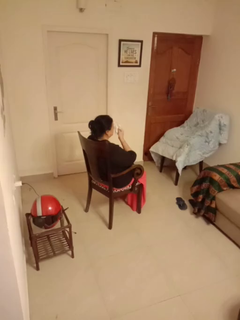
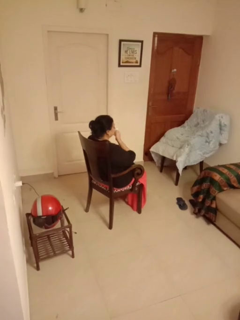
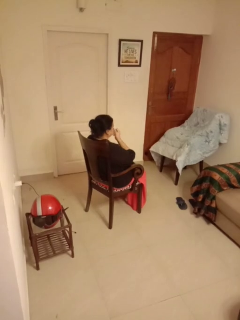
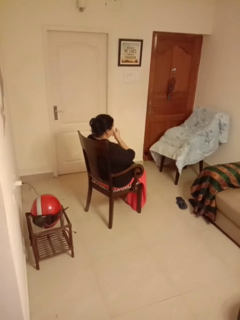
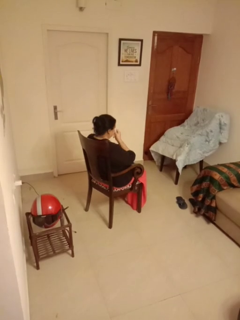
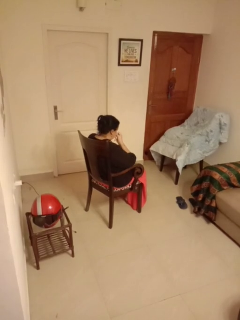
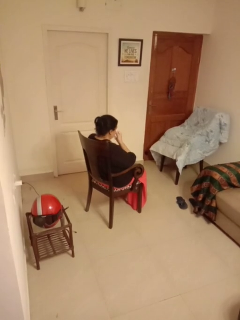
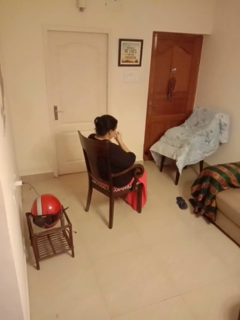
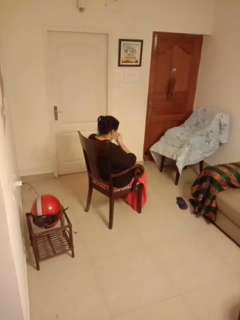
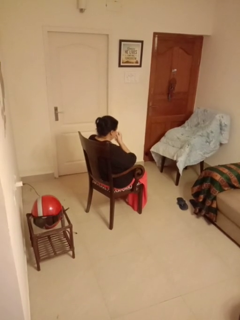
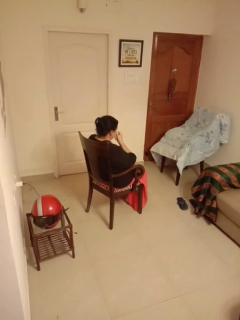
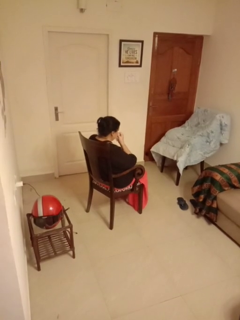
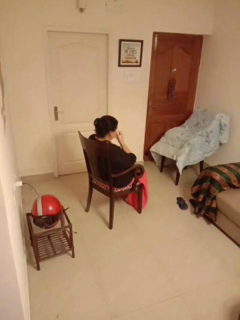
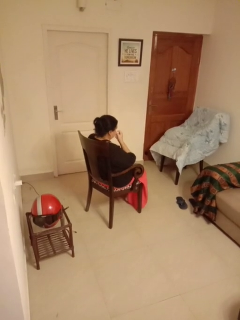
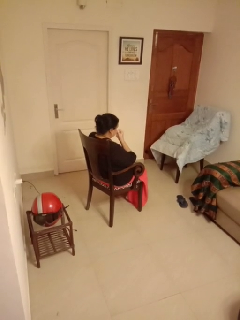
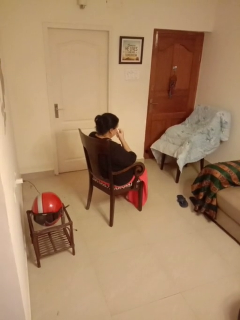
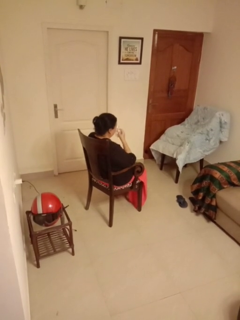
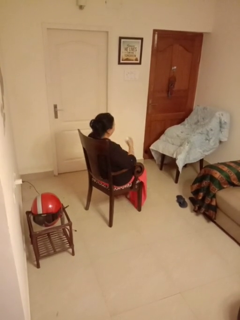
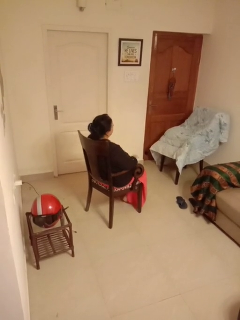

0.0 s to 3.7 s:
person blows nose

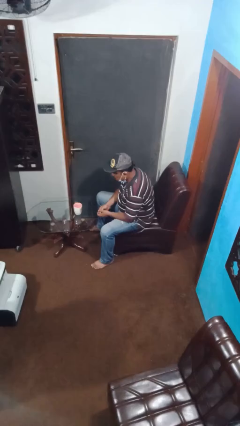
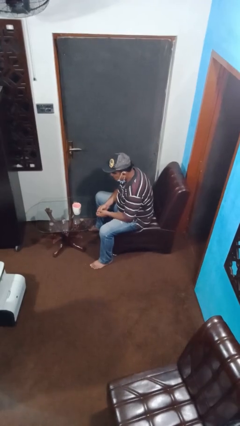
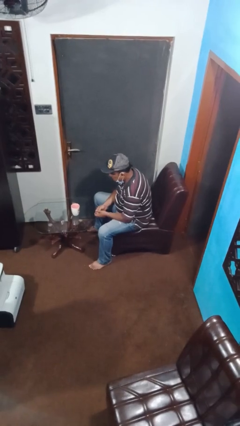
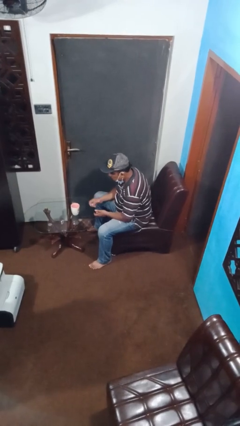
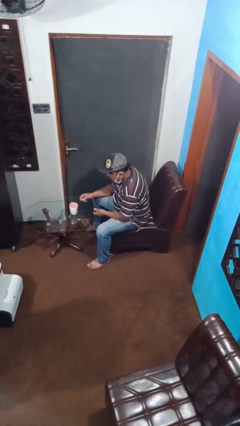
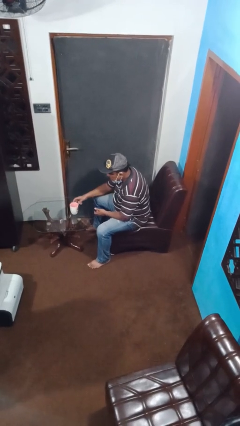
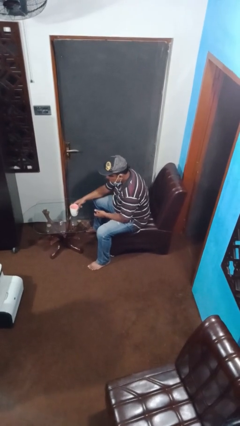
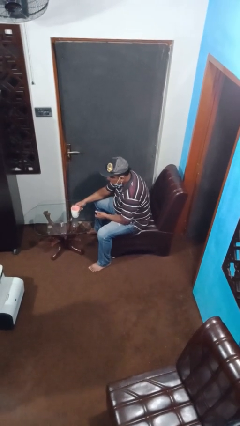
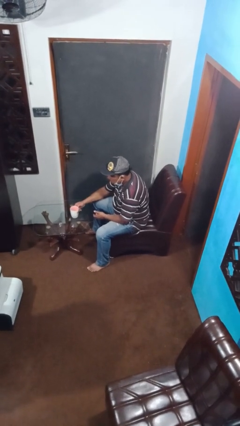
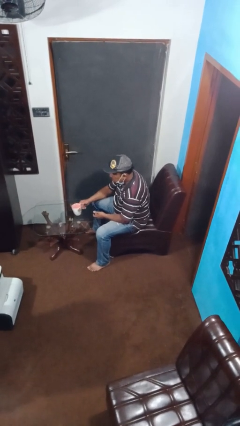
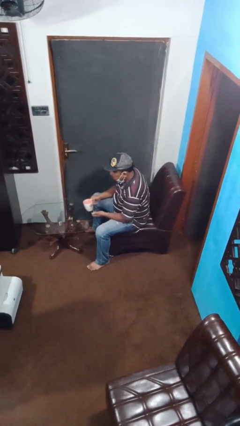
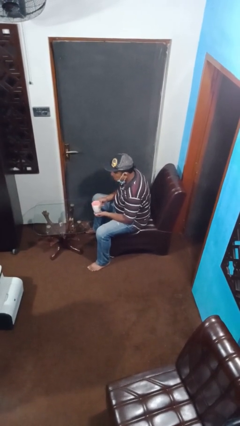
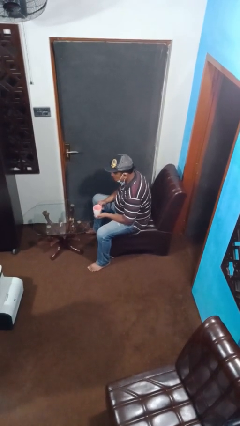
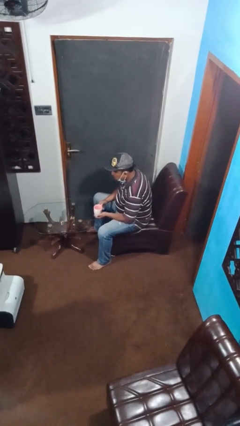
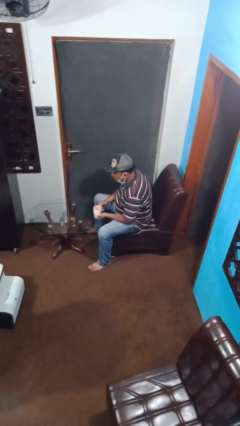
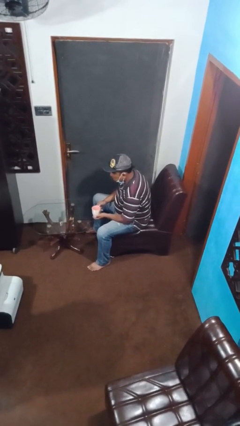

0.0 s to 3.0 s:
person picks up object from table

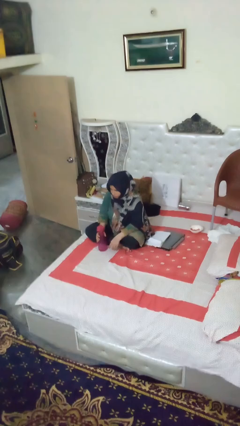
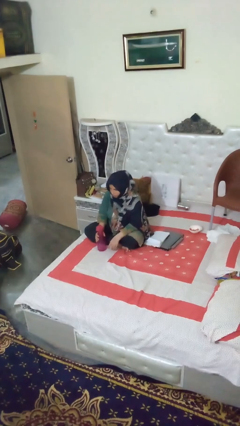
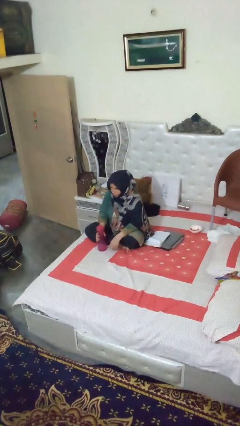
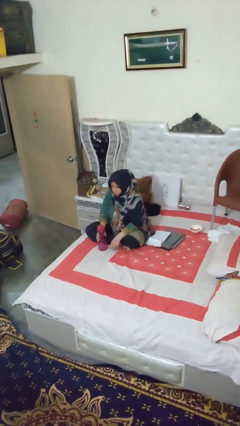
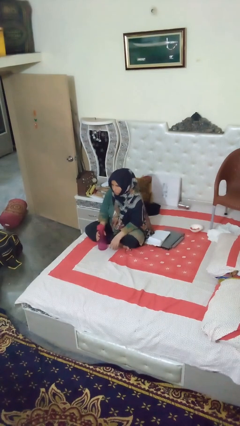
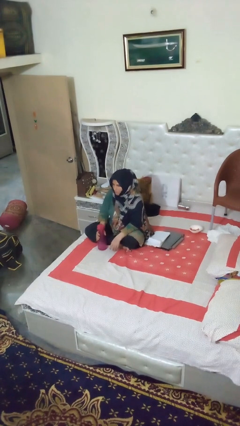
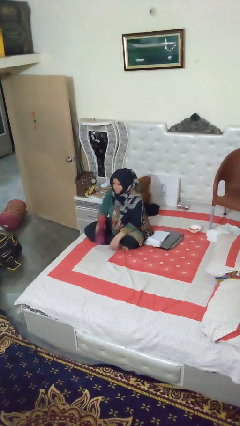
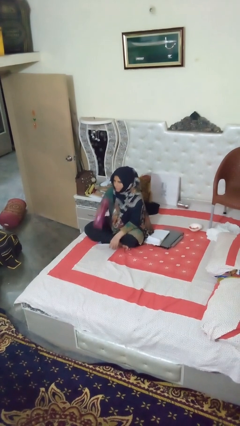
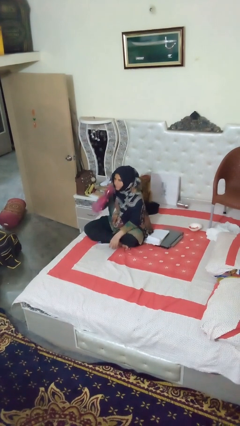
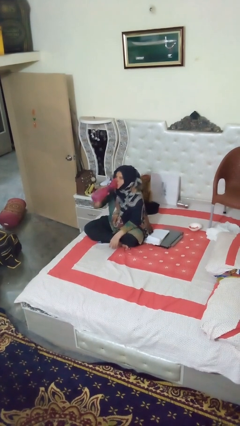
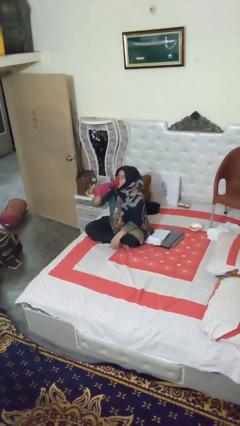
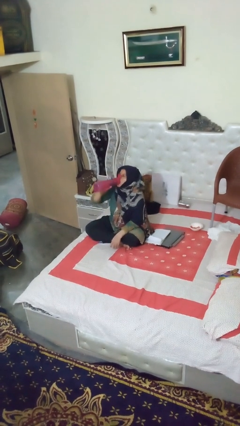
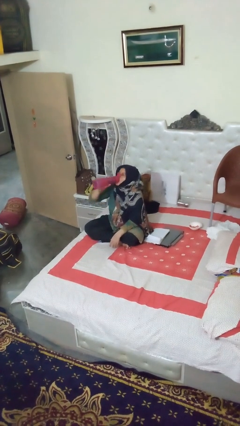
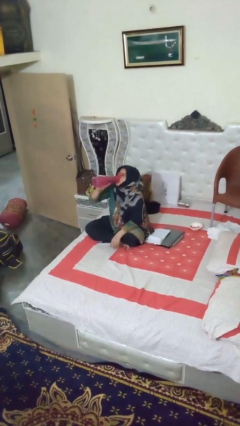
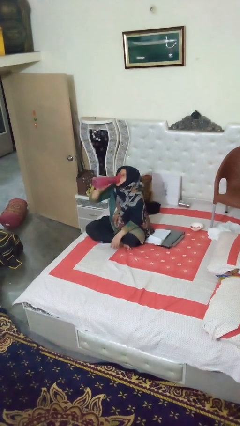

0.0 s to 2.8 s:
person drinks from bottle

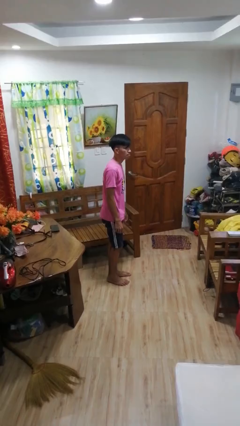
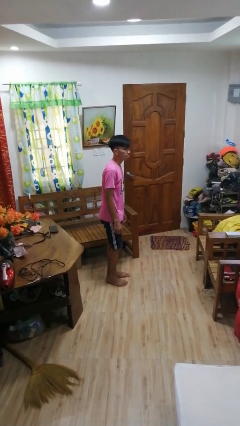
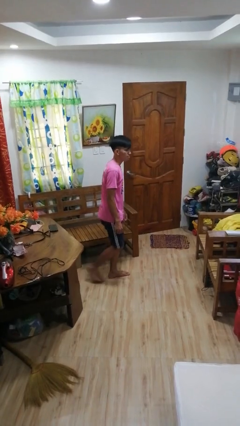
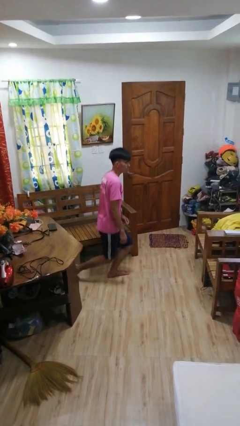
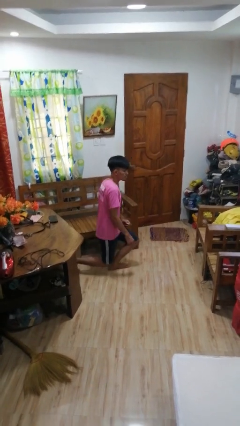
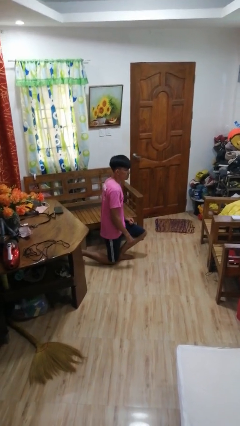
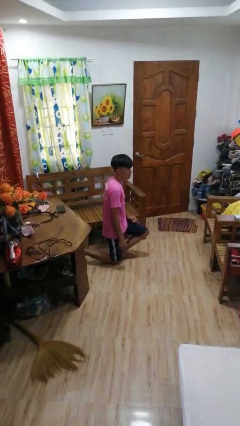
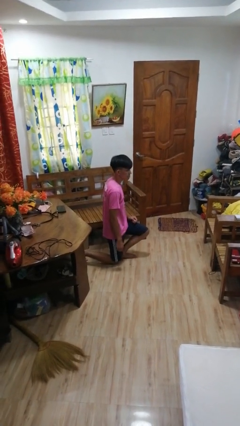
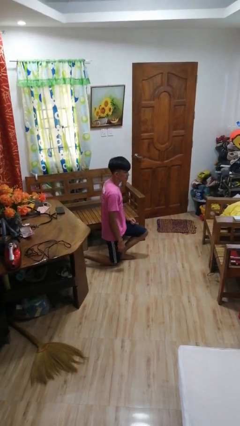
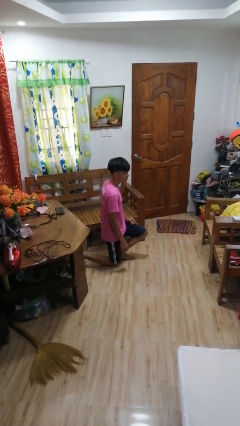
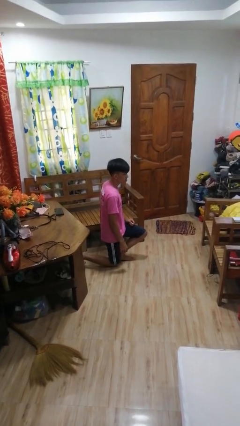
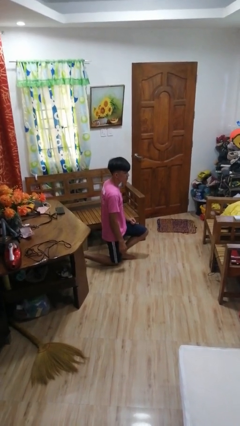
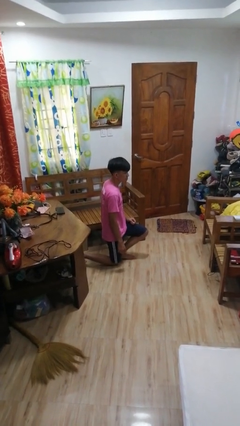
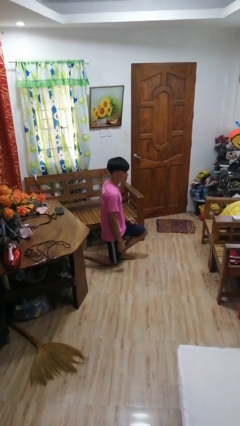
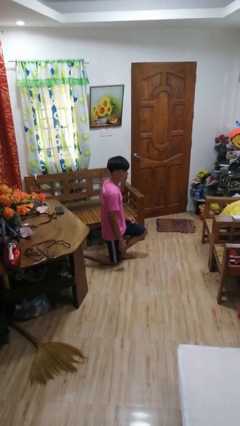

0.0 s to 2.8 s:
person kneels

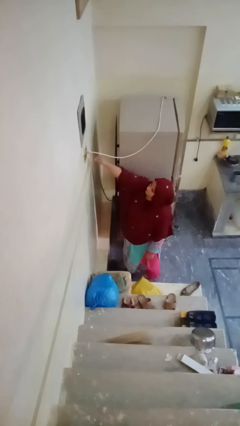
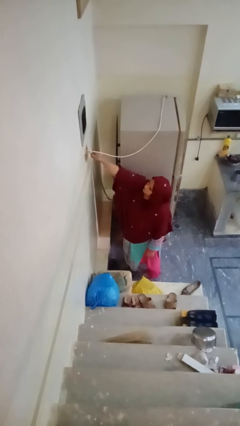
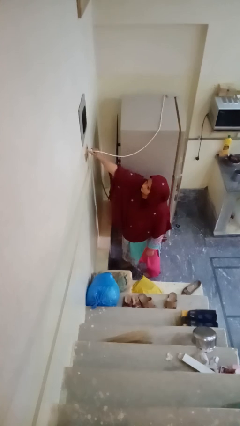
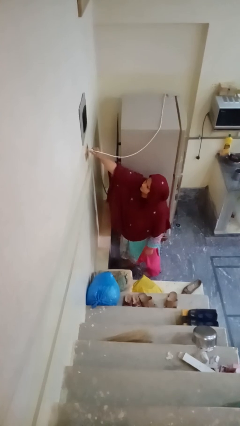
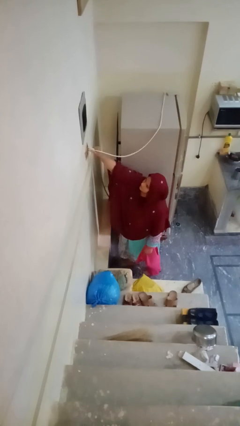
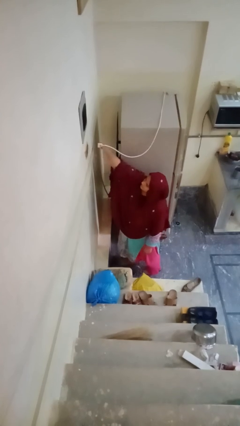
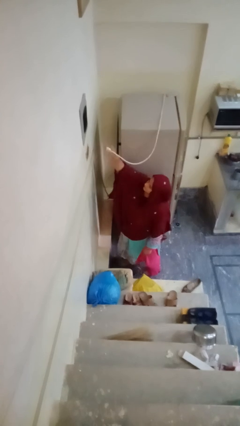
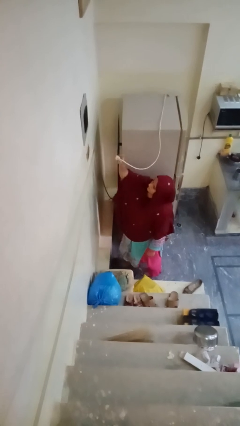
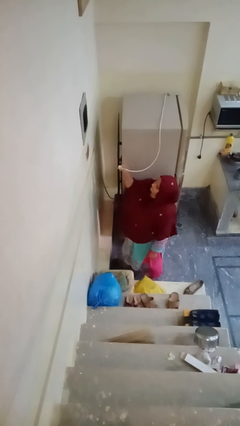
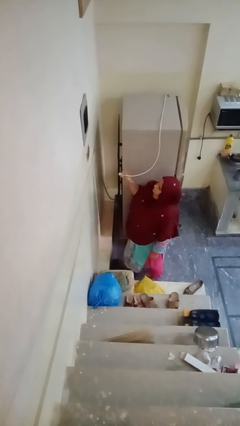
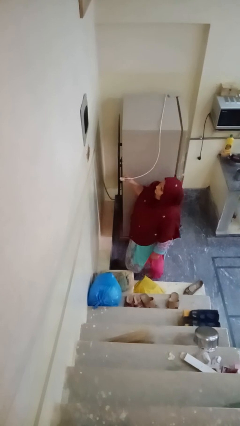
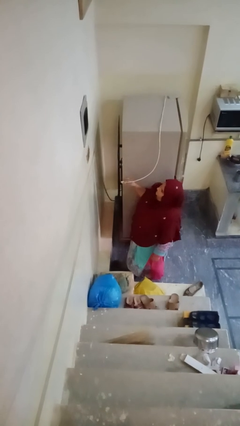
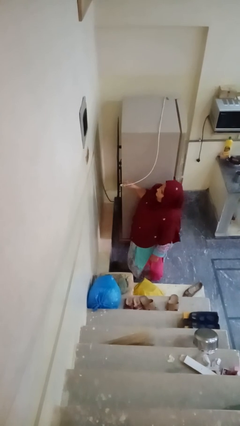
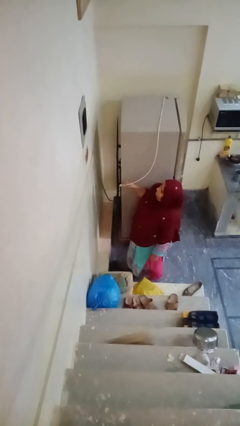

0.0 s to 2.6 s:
person unplugs from electrical socket

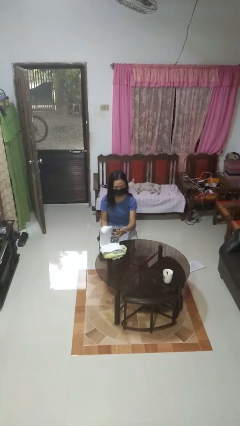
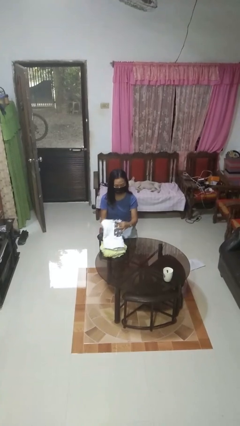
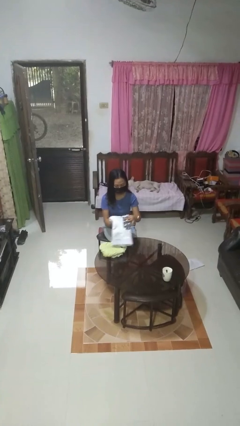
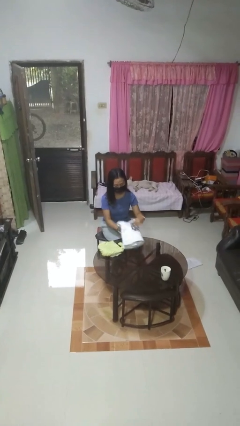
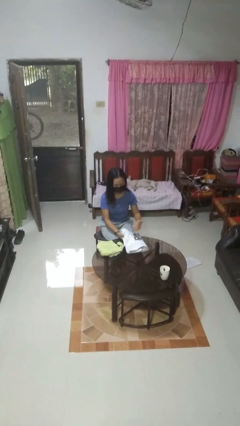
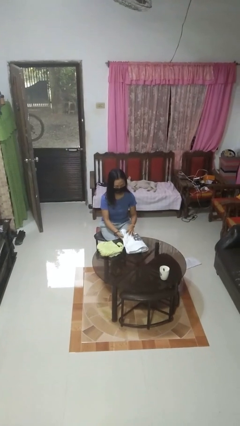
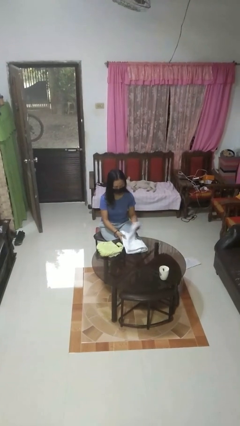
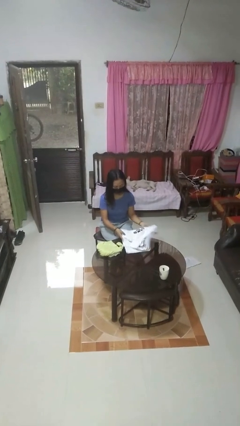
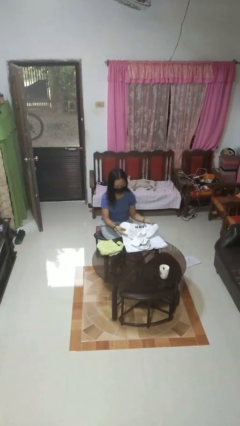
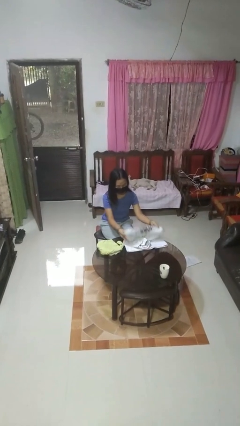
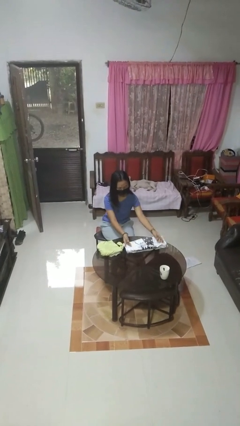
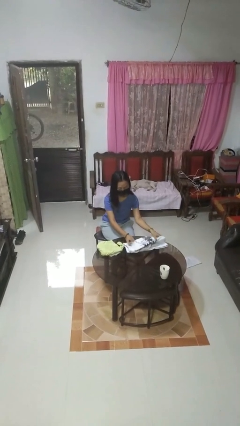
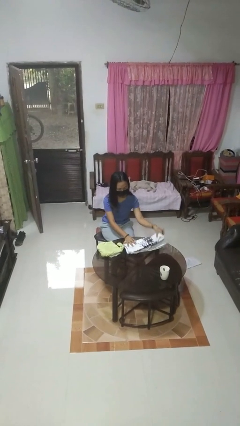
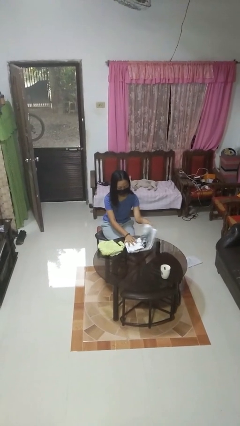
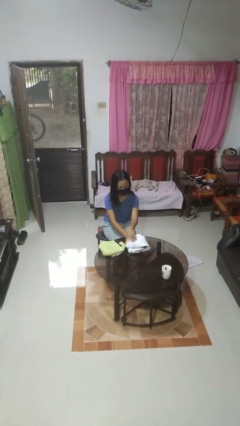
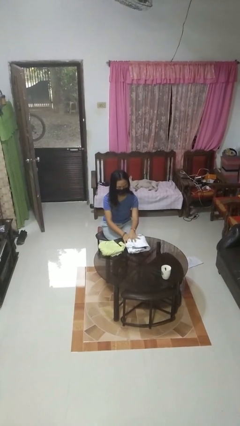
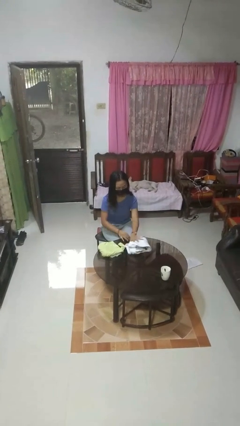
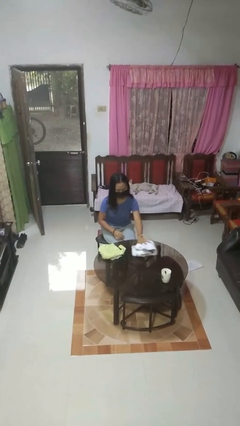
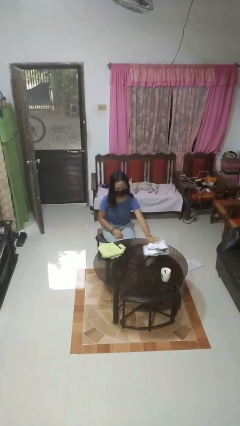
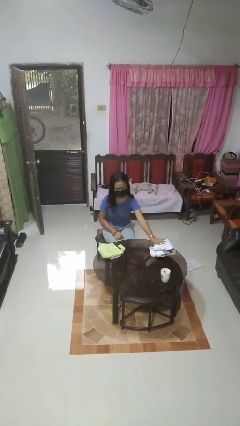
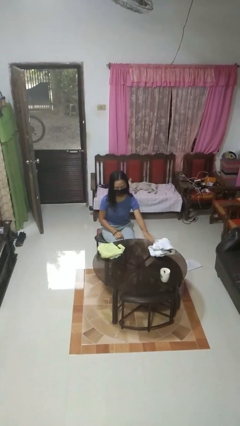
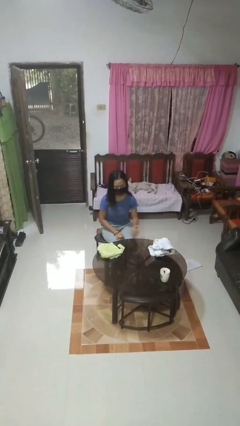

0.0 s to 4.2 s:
person folds towel
